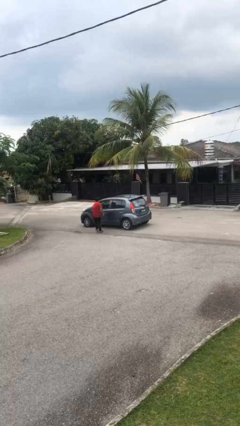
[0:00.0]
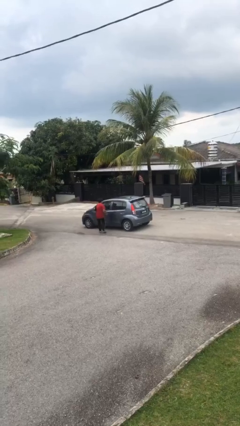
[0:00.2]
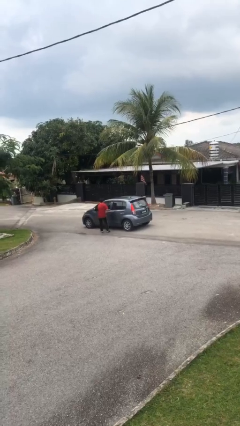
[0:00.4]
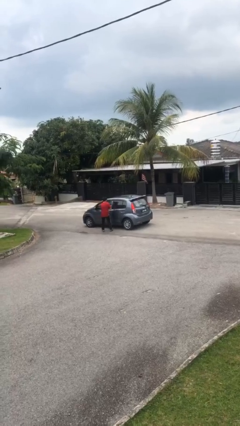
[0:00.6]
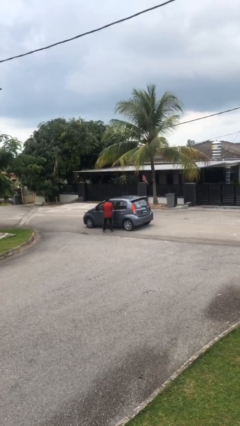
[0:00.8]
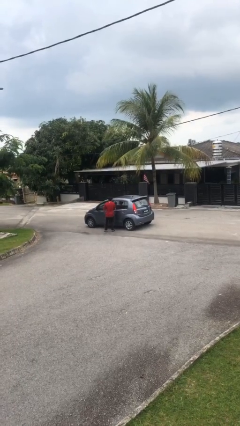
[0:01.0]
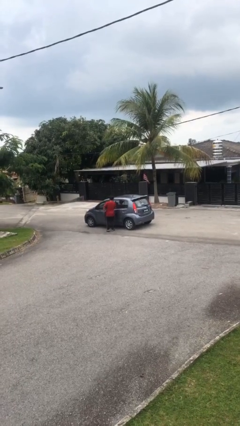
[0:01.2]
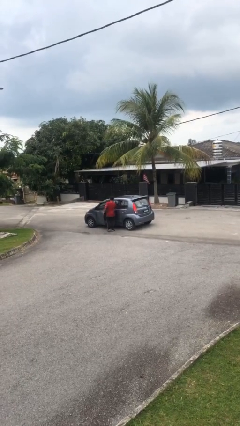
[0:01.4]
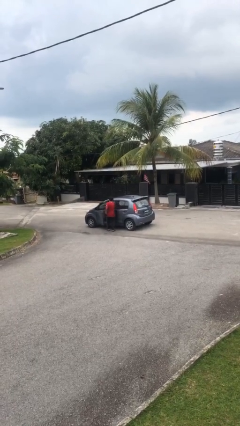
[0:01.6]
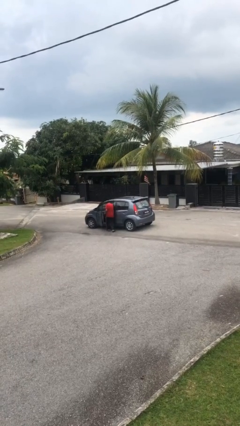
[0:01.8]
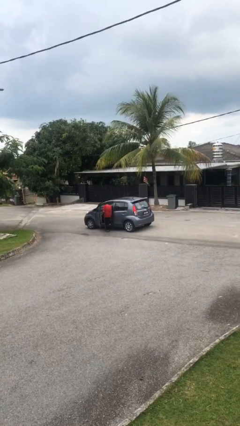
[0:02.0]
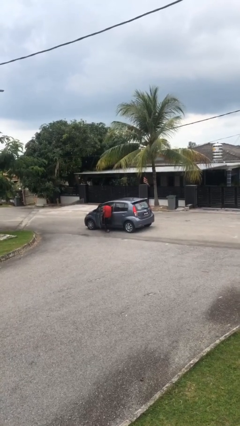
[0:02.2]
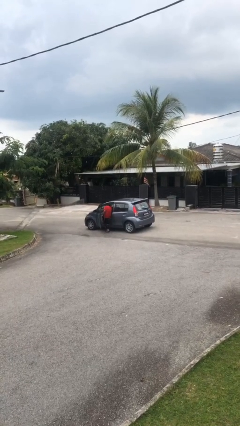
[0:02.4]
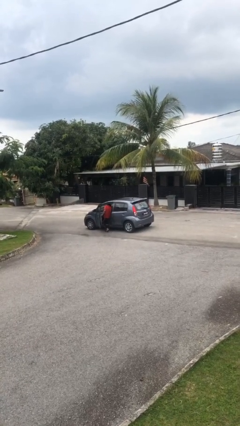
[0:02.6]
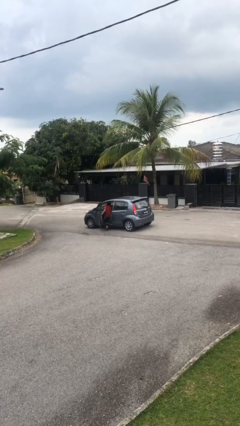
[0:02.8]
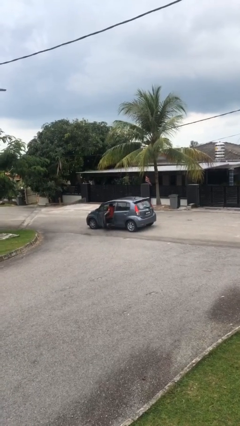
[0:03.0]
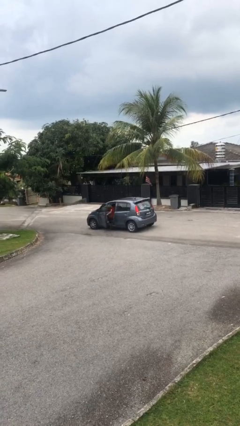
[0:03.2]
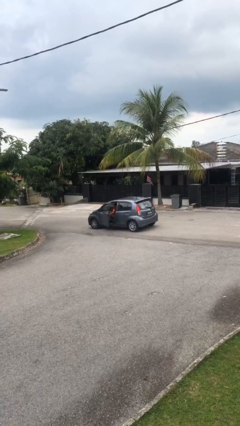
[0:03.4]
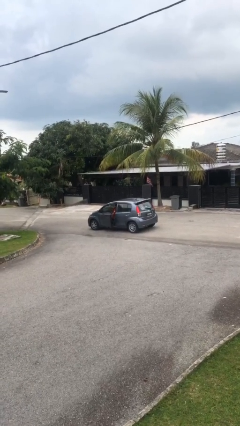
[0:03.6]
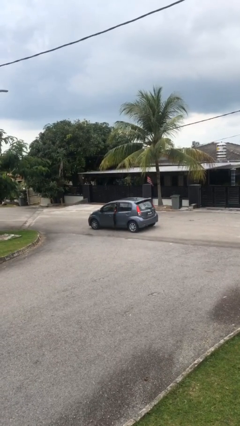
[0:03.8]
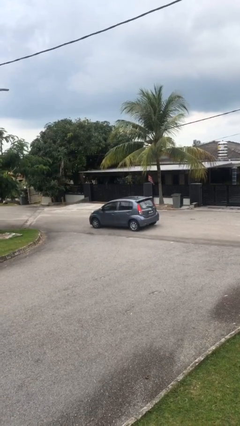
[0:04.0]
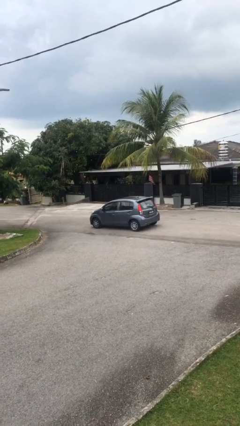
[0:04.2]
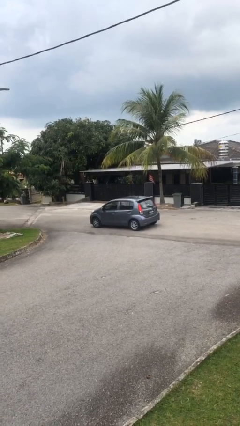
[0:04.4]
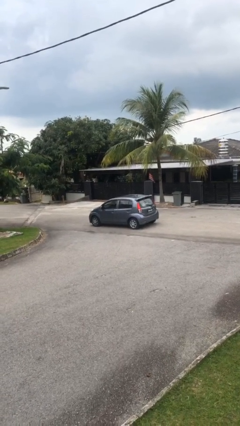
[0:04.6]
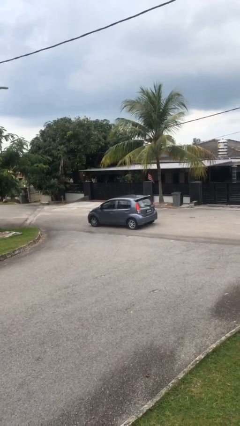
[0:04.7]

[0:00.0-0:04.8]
car picks up person

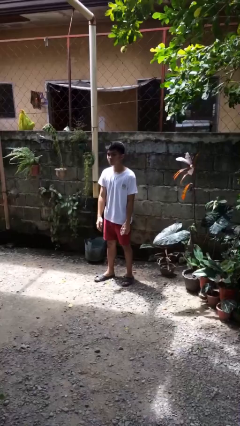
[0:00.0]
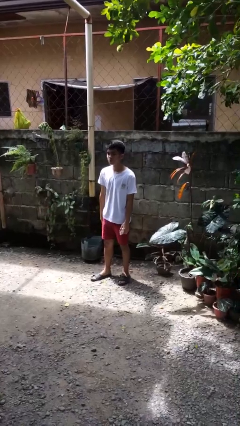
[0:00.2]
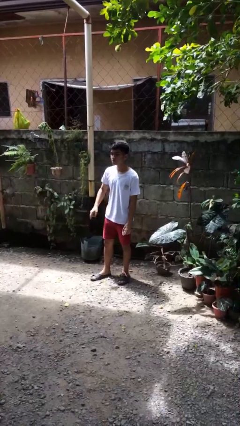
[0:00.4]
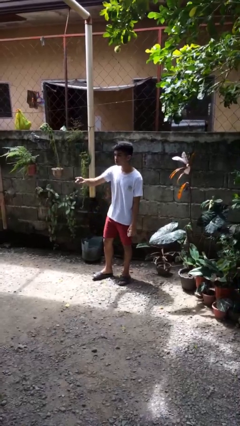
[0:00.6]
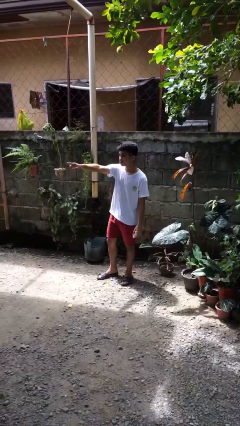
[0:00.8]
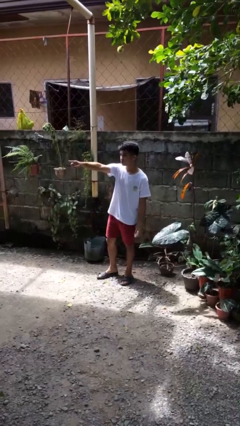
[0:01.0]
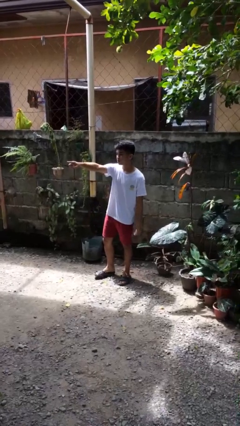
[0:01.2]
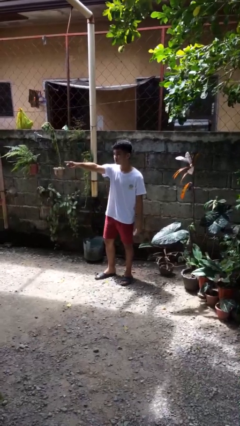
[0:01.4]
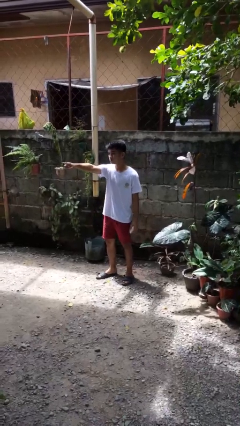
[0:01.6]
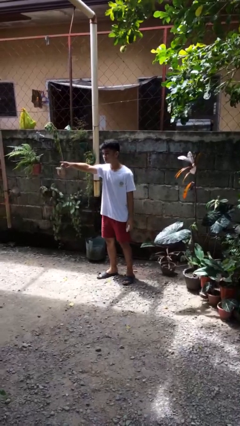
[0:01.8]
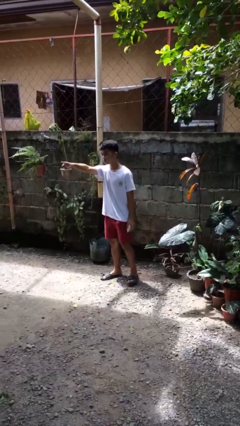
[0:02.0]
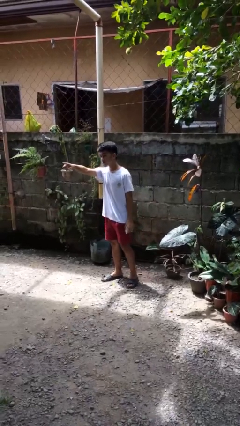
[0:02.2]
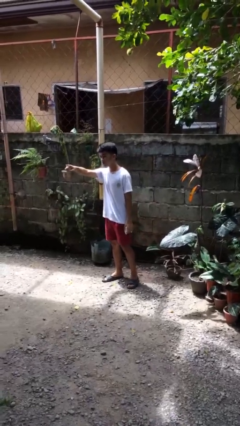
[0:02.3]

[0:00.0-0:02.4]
person points at person

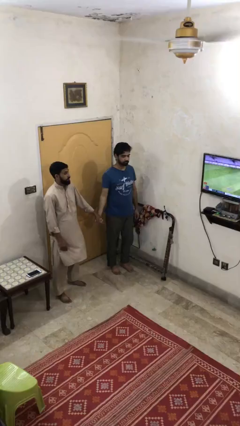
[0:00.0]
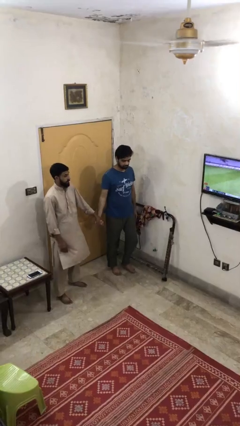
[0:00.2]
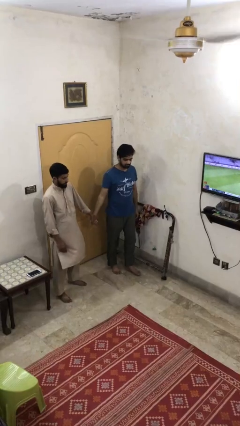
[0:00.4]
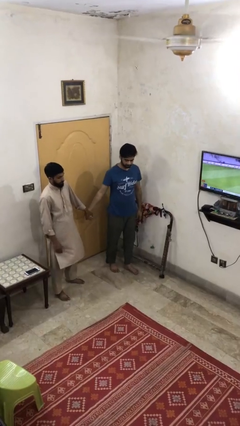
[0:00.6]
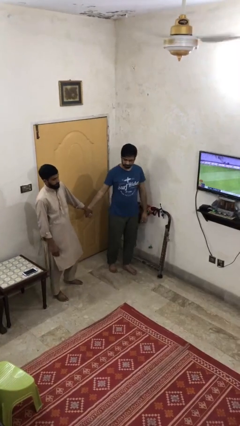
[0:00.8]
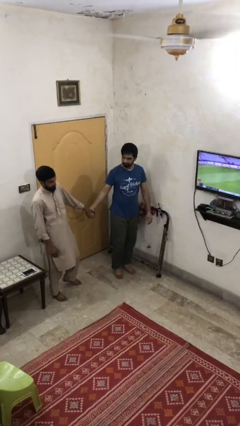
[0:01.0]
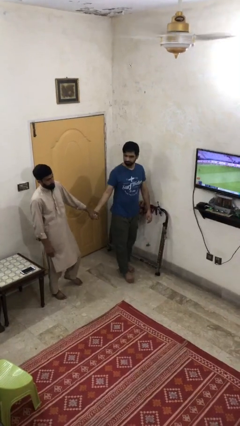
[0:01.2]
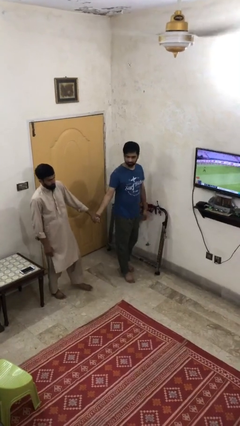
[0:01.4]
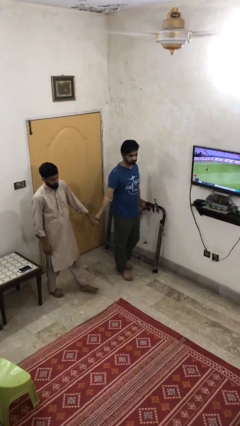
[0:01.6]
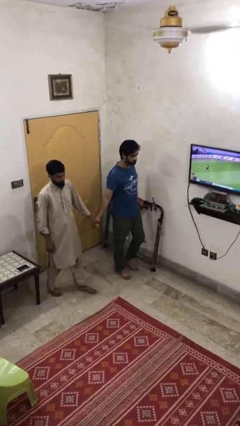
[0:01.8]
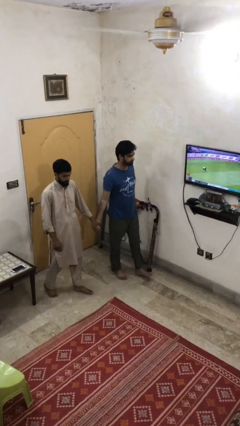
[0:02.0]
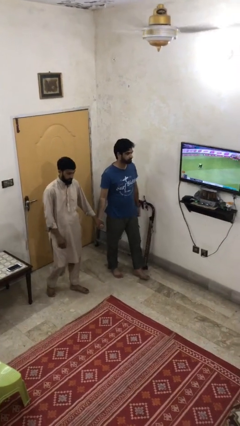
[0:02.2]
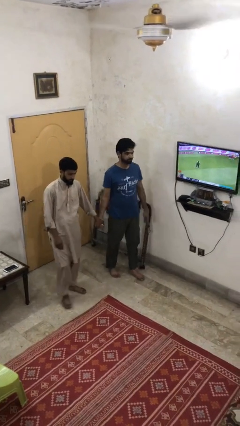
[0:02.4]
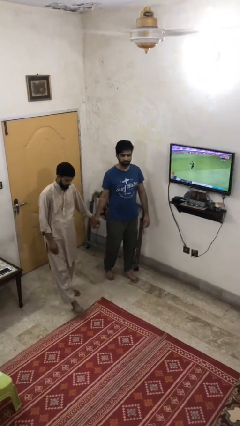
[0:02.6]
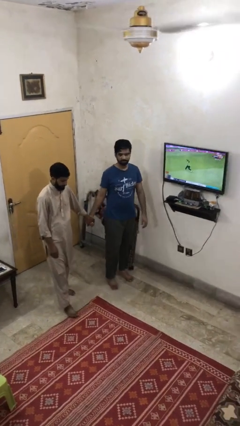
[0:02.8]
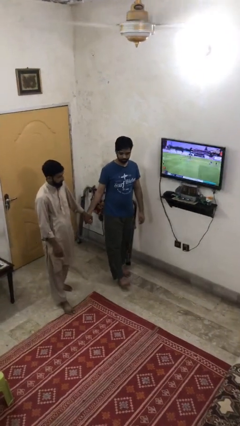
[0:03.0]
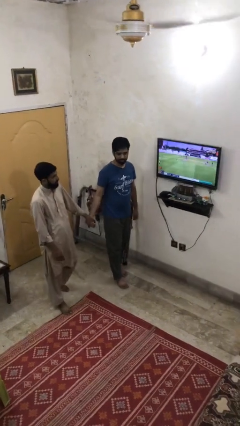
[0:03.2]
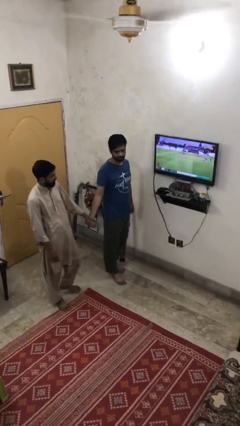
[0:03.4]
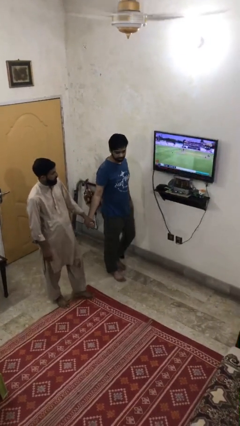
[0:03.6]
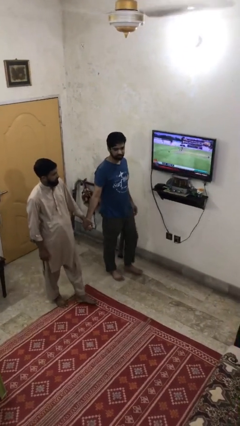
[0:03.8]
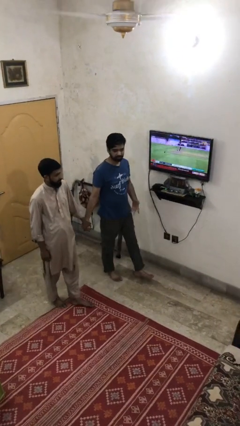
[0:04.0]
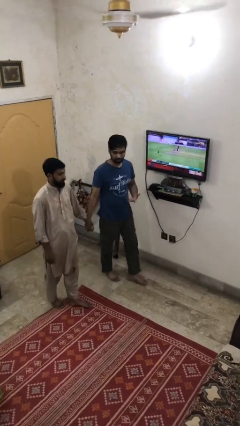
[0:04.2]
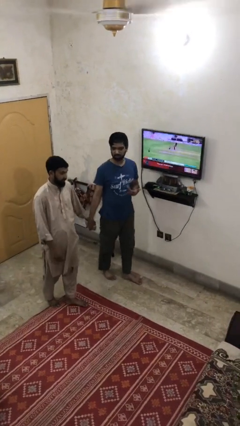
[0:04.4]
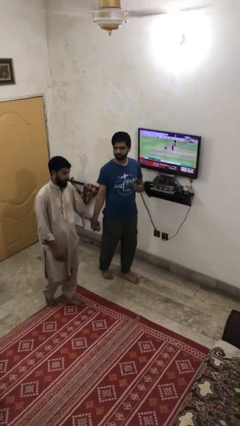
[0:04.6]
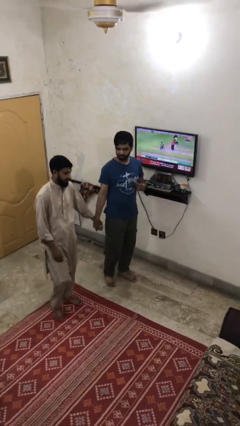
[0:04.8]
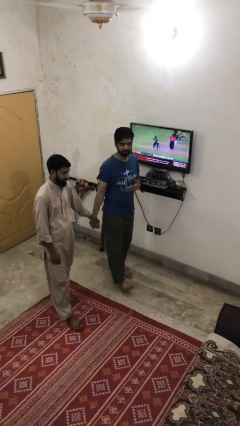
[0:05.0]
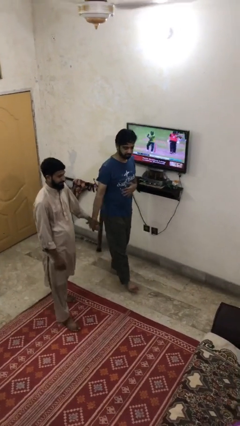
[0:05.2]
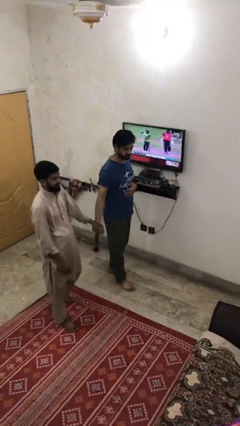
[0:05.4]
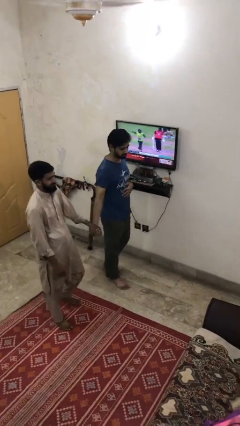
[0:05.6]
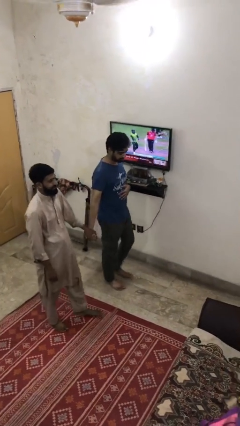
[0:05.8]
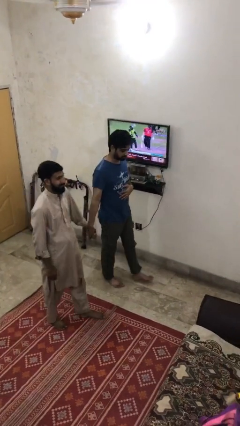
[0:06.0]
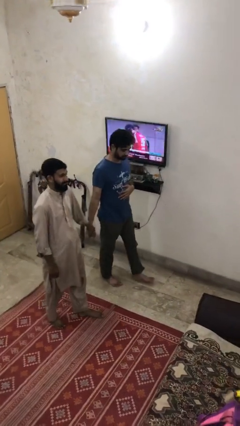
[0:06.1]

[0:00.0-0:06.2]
person holds hand

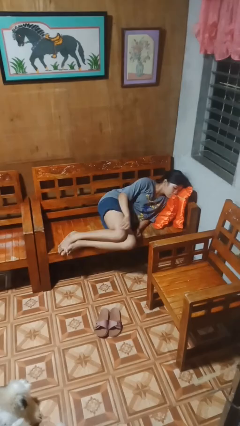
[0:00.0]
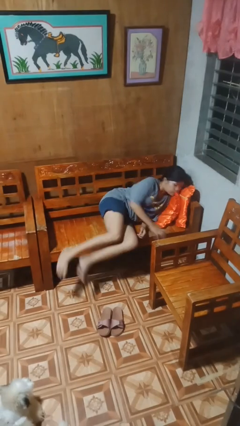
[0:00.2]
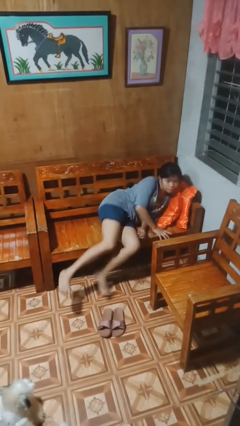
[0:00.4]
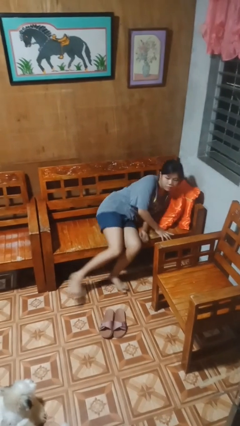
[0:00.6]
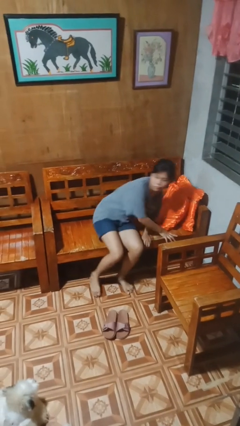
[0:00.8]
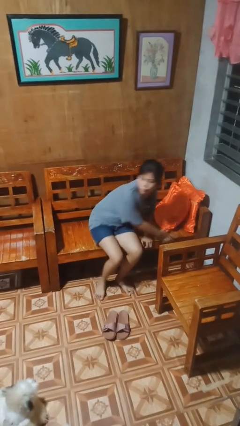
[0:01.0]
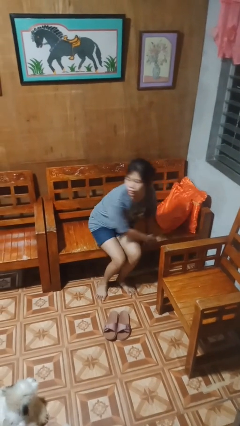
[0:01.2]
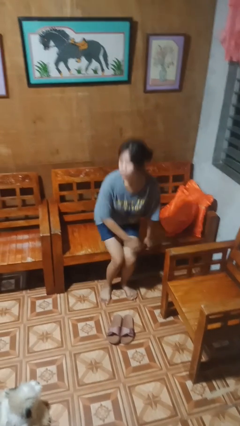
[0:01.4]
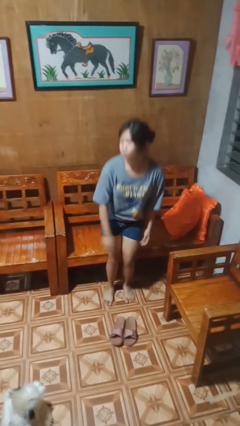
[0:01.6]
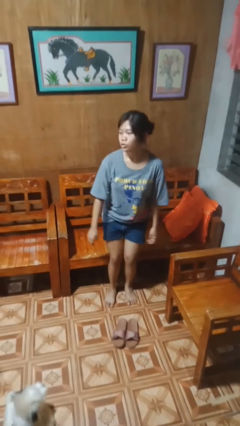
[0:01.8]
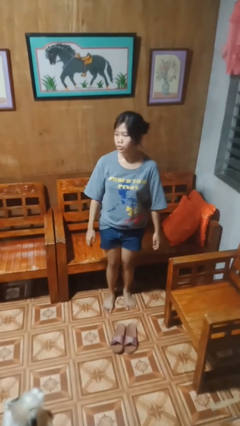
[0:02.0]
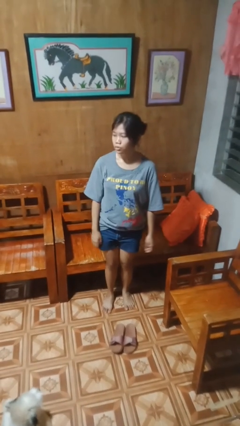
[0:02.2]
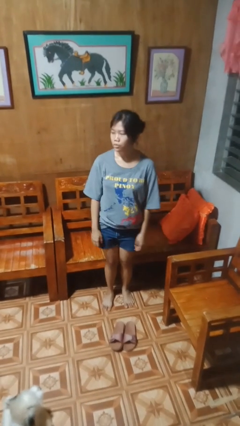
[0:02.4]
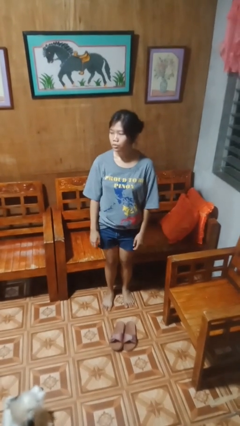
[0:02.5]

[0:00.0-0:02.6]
person stands up

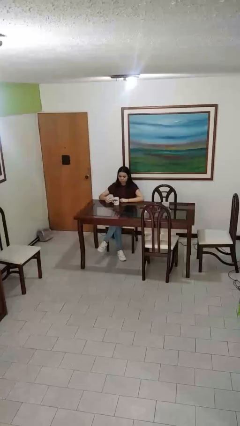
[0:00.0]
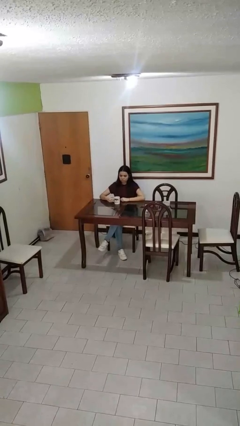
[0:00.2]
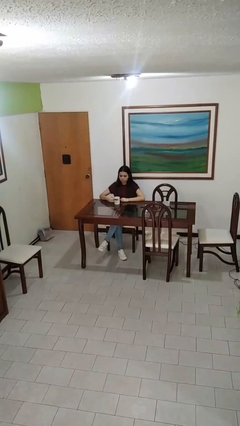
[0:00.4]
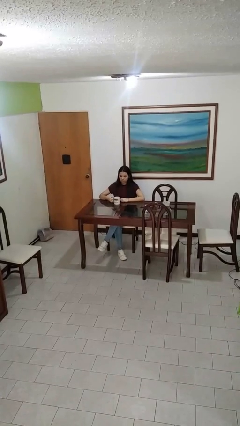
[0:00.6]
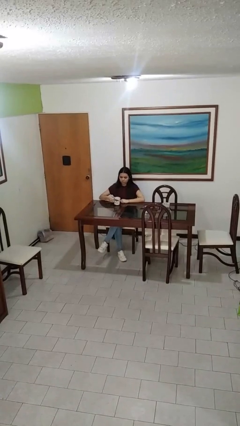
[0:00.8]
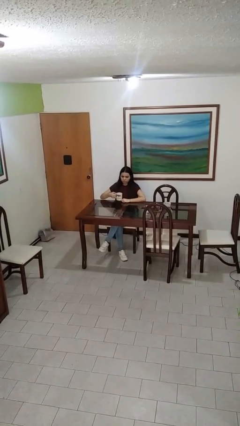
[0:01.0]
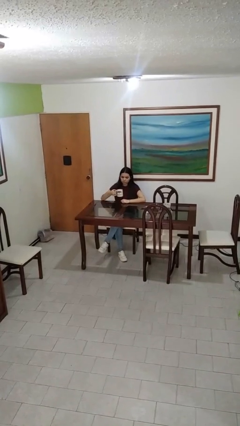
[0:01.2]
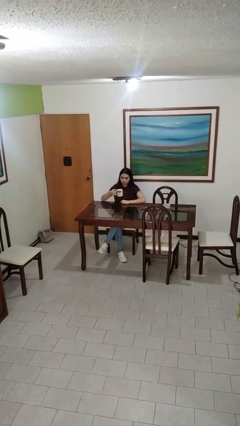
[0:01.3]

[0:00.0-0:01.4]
person picks up object from table

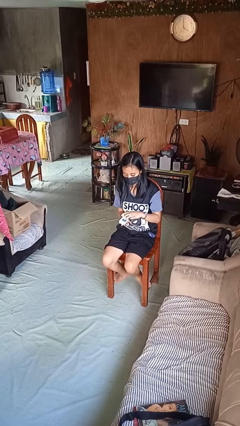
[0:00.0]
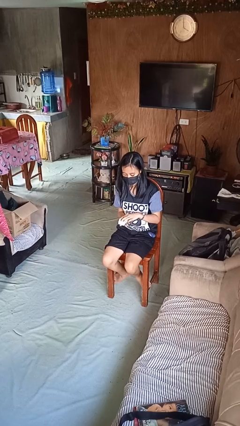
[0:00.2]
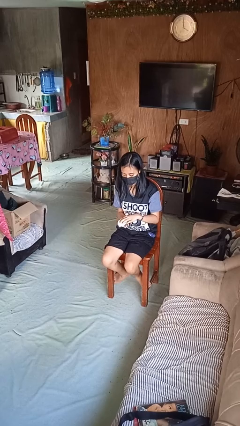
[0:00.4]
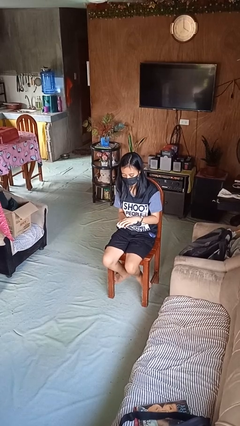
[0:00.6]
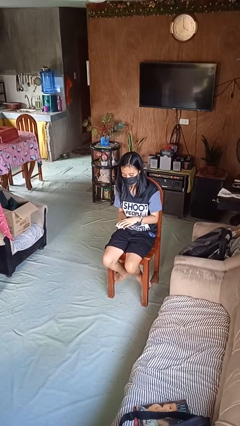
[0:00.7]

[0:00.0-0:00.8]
person closes jewelry box
